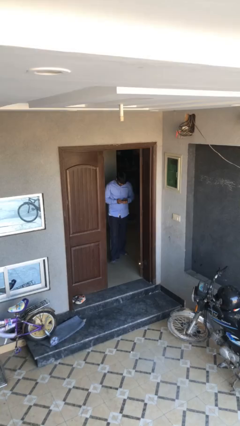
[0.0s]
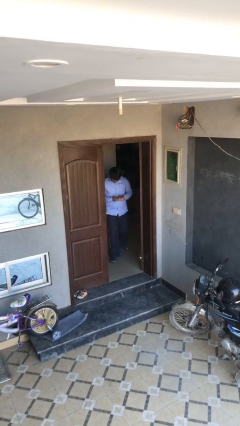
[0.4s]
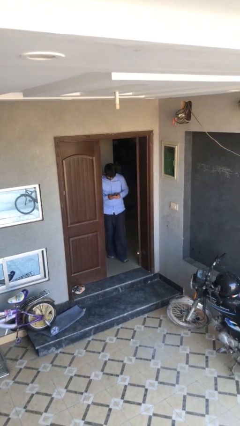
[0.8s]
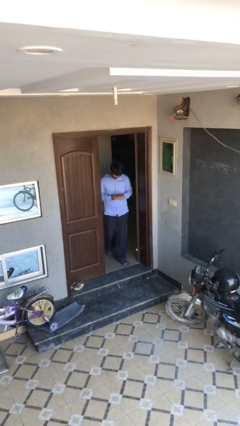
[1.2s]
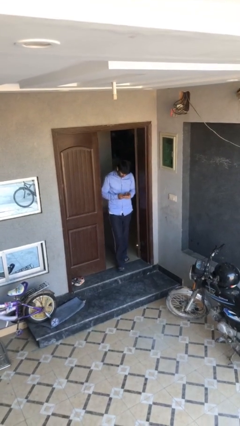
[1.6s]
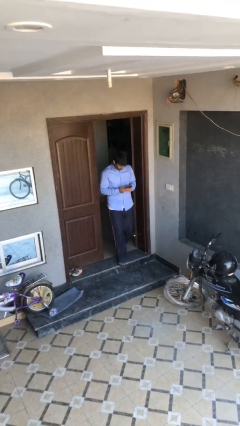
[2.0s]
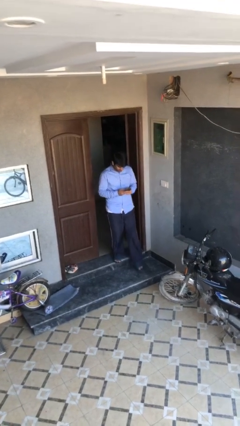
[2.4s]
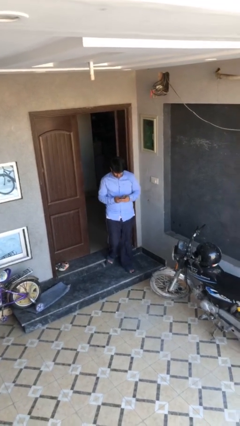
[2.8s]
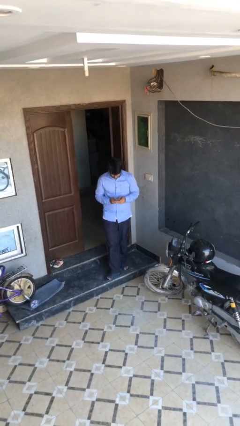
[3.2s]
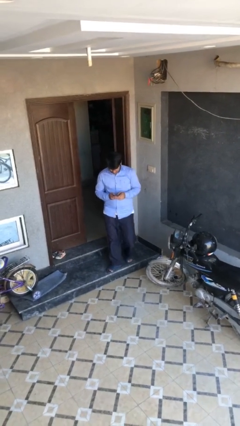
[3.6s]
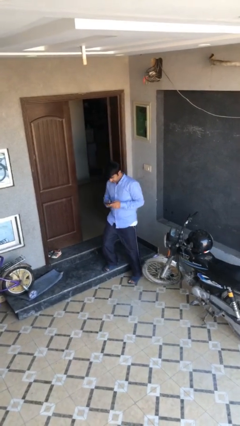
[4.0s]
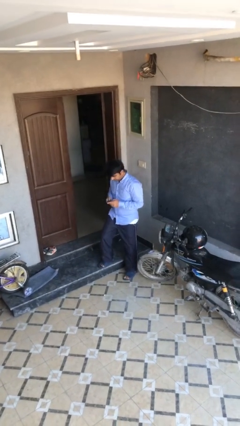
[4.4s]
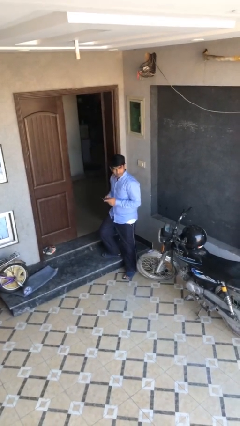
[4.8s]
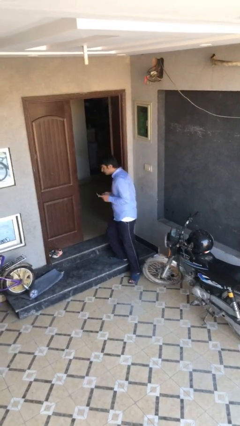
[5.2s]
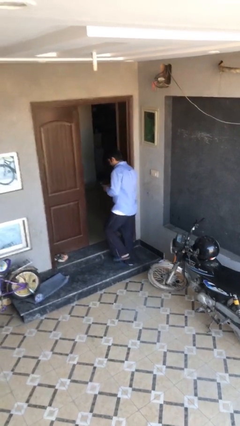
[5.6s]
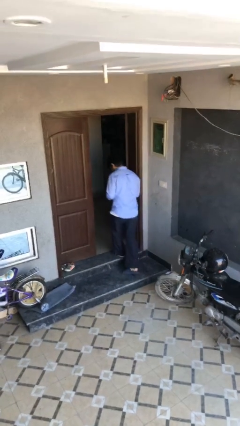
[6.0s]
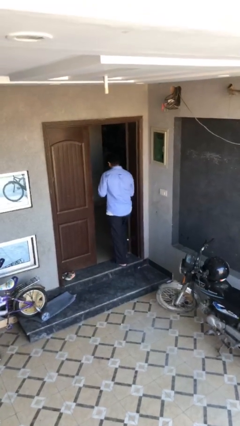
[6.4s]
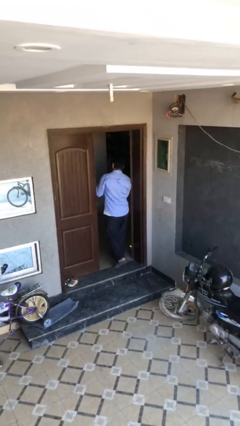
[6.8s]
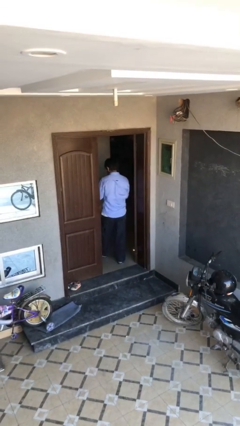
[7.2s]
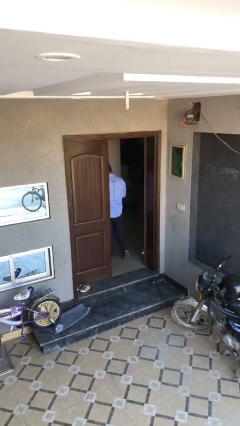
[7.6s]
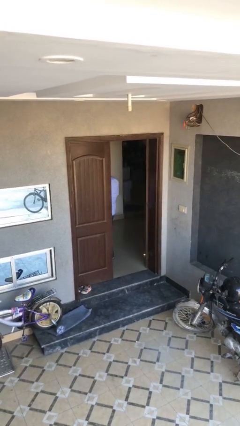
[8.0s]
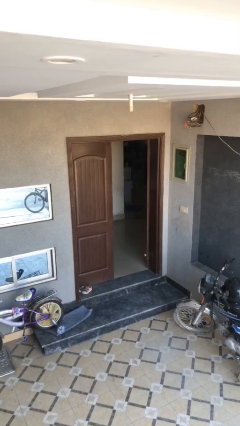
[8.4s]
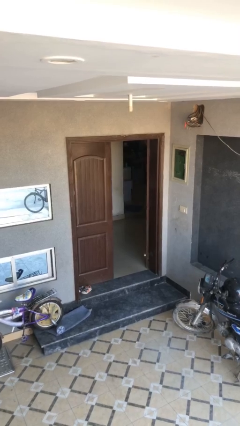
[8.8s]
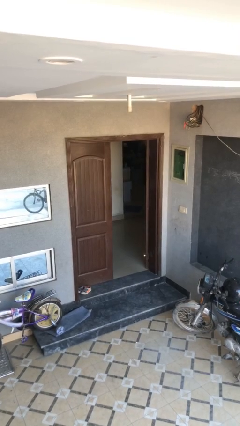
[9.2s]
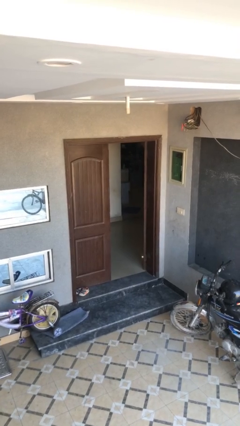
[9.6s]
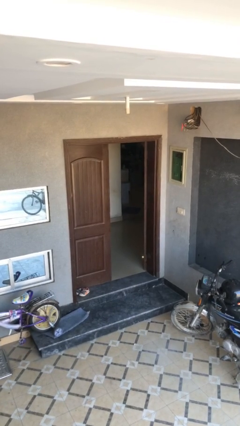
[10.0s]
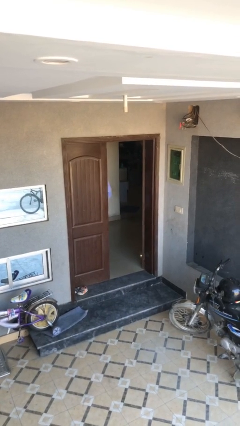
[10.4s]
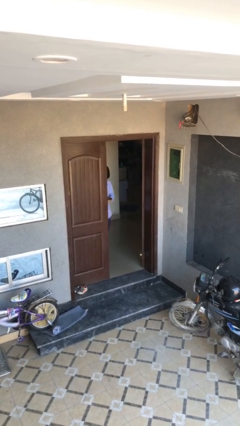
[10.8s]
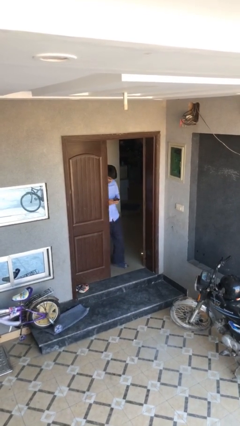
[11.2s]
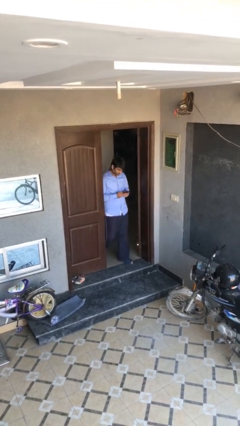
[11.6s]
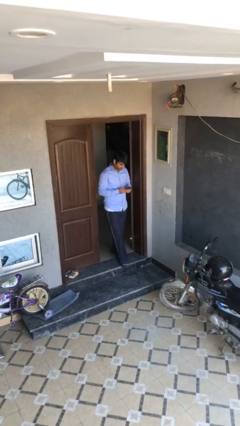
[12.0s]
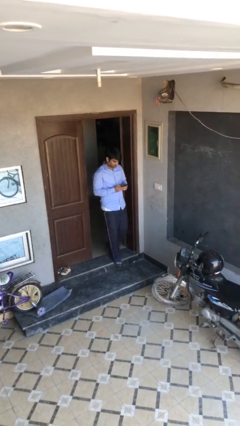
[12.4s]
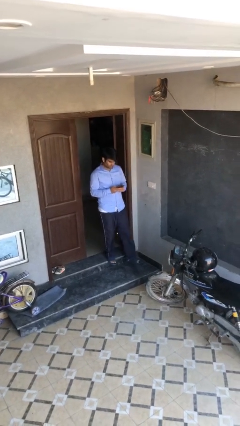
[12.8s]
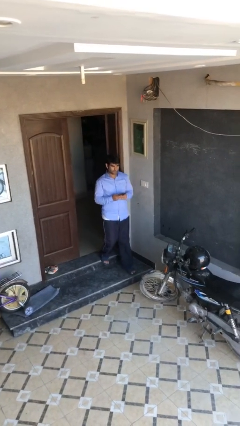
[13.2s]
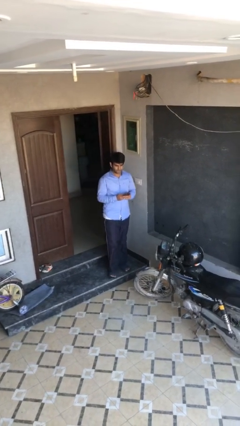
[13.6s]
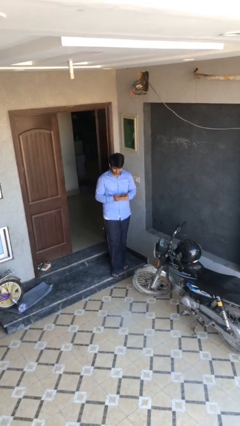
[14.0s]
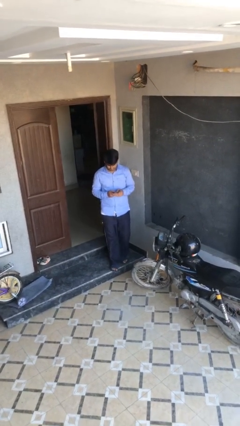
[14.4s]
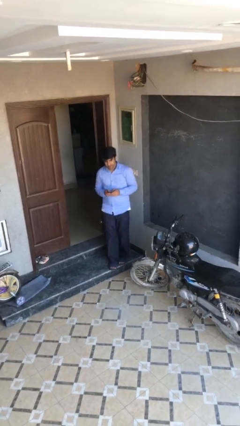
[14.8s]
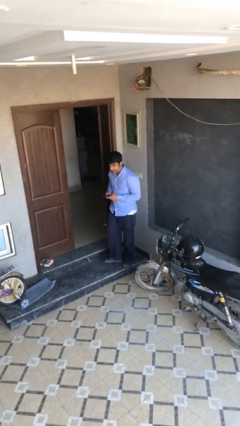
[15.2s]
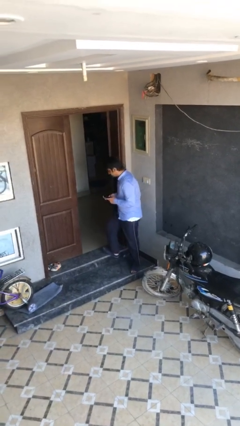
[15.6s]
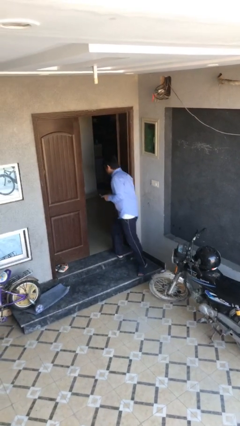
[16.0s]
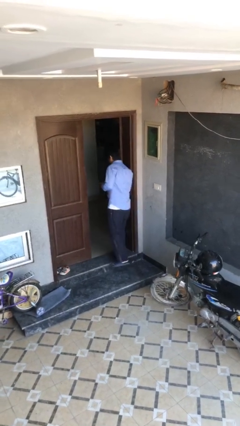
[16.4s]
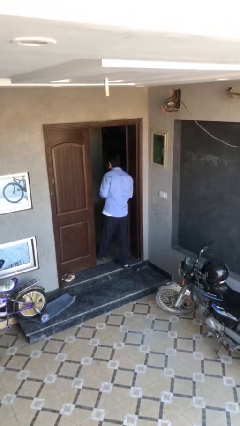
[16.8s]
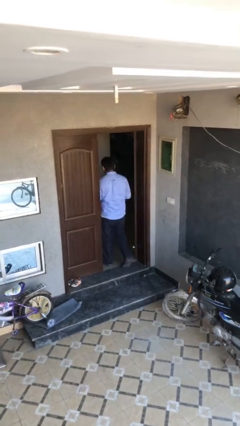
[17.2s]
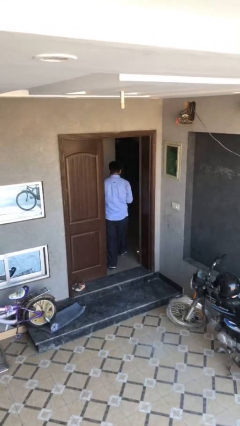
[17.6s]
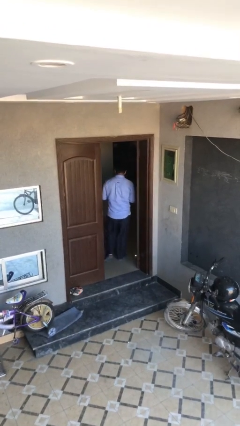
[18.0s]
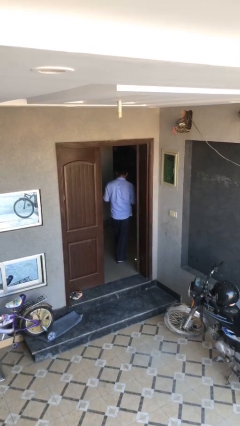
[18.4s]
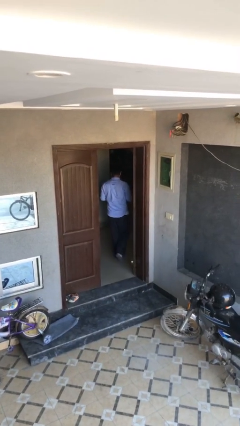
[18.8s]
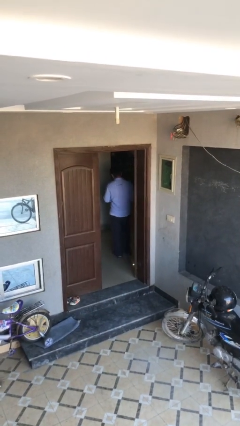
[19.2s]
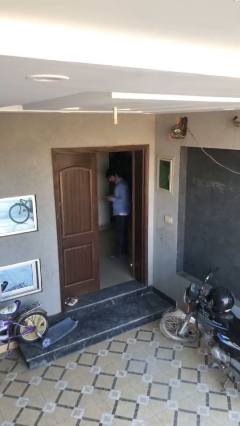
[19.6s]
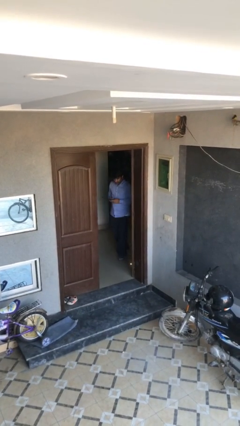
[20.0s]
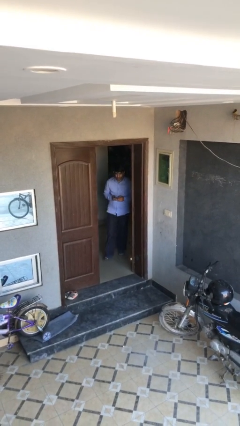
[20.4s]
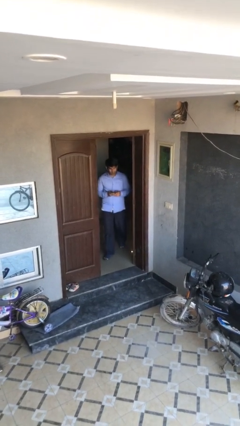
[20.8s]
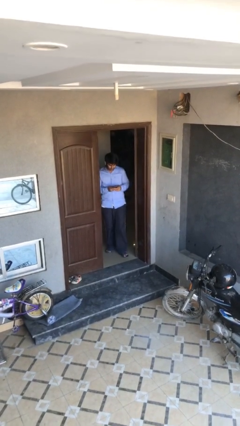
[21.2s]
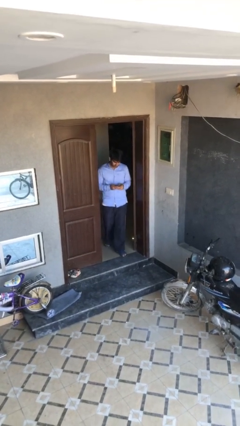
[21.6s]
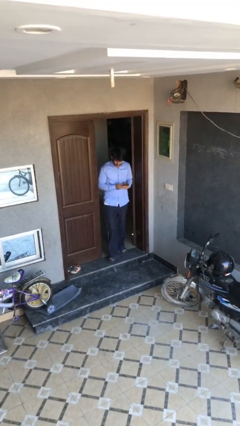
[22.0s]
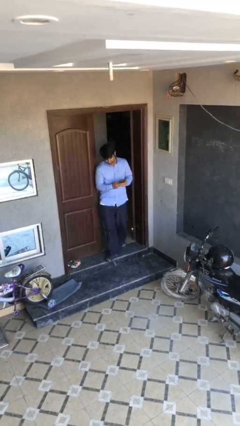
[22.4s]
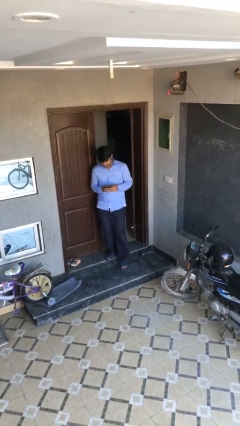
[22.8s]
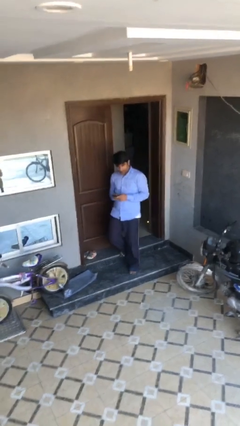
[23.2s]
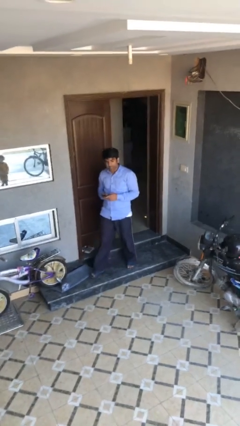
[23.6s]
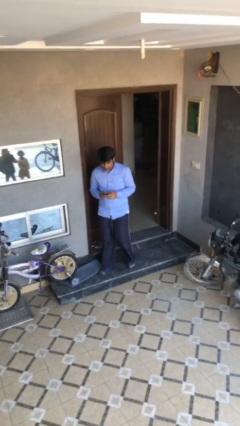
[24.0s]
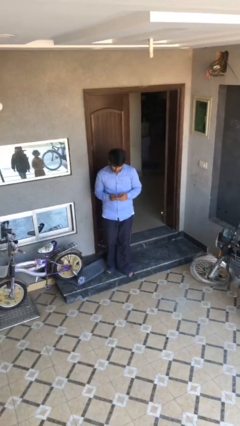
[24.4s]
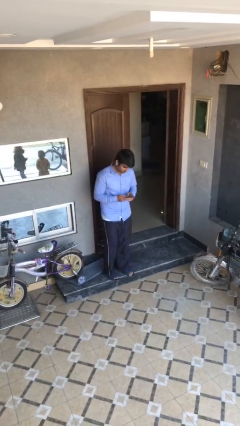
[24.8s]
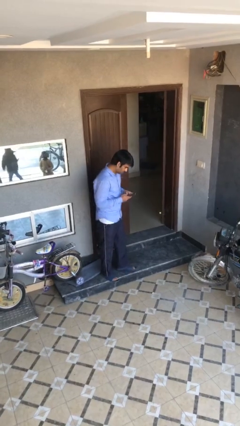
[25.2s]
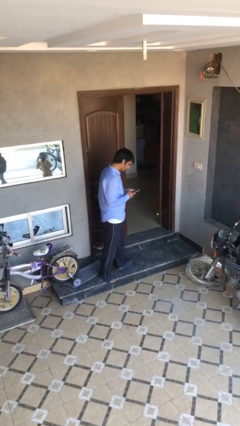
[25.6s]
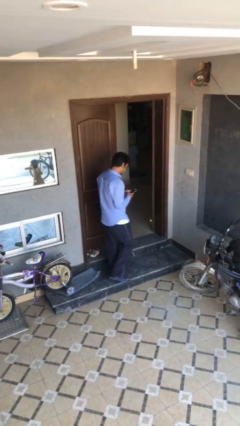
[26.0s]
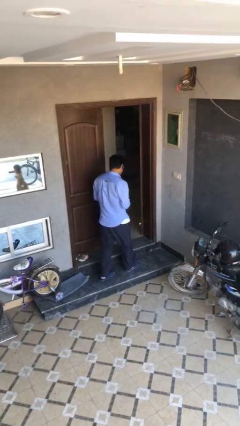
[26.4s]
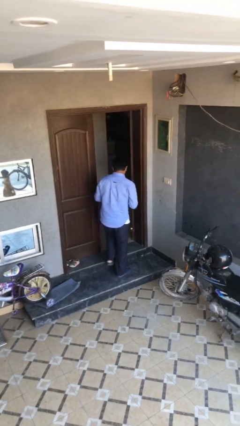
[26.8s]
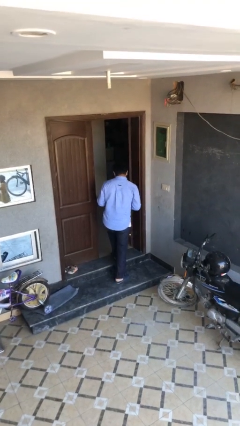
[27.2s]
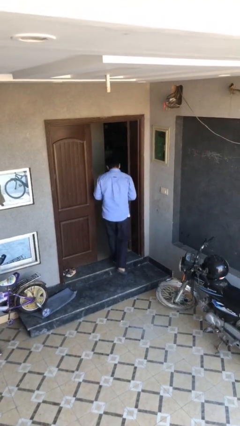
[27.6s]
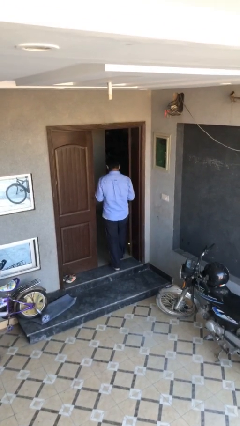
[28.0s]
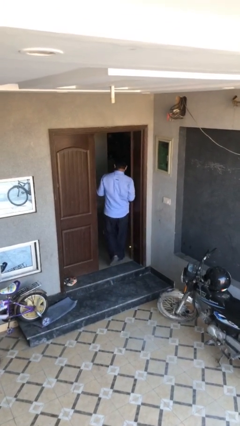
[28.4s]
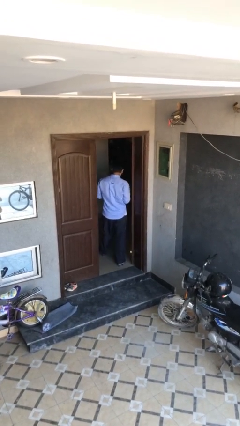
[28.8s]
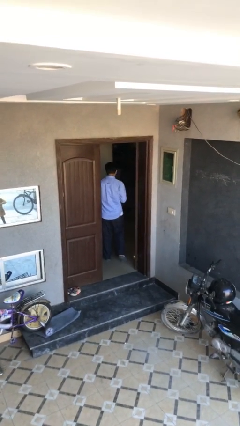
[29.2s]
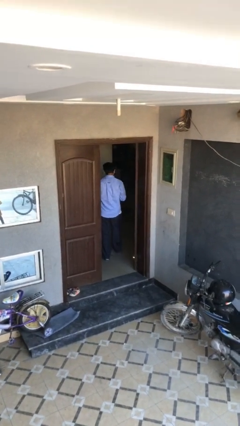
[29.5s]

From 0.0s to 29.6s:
person texts on phone

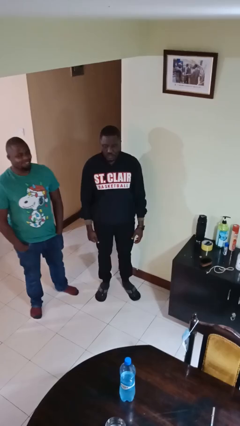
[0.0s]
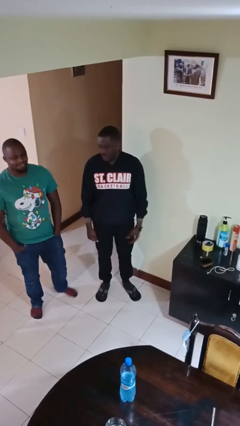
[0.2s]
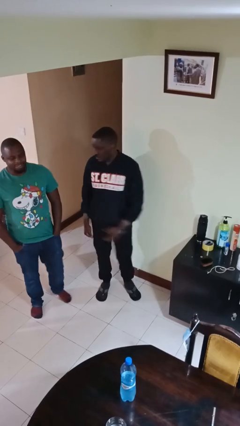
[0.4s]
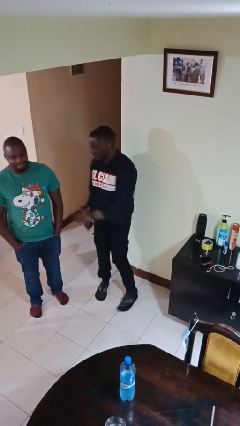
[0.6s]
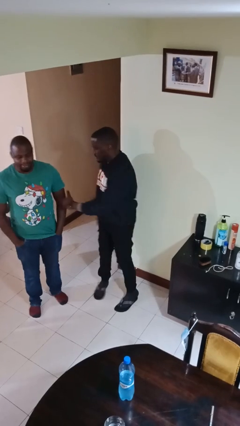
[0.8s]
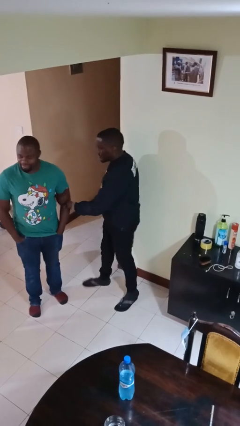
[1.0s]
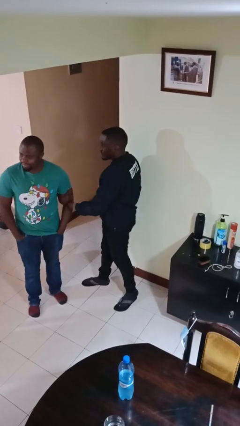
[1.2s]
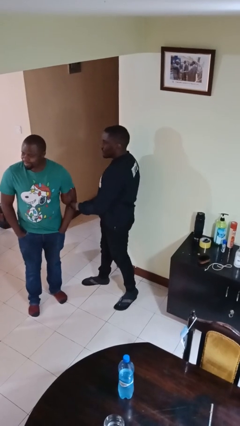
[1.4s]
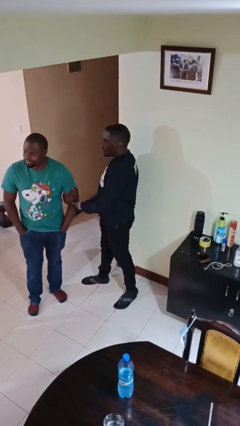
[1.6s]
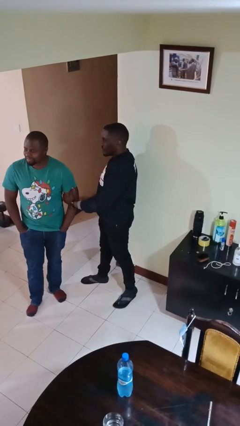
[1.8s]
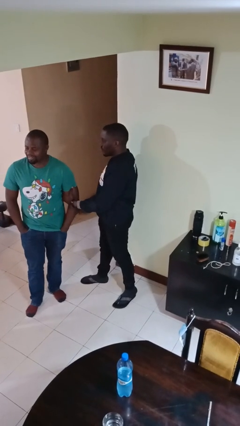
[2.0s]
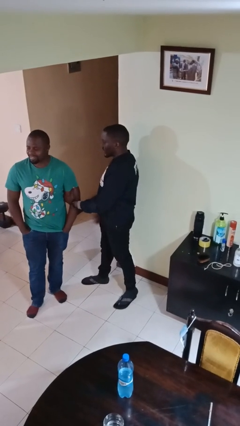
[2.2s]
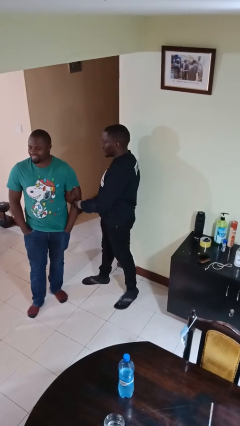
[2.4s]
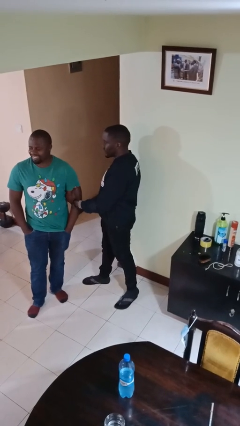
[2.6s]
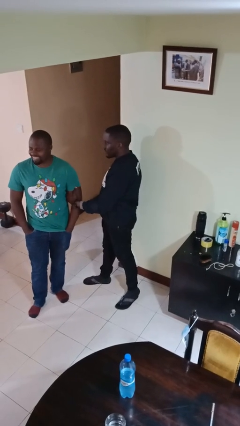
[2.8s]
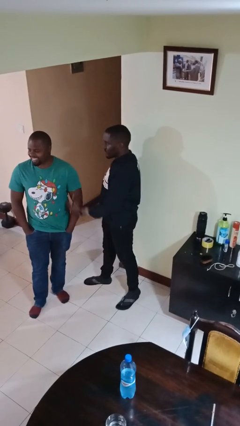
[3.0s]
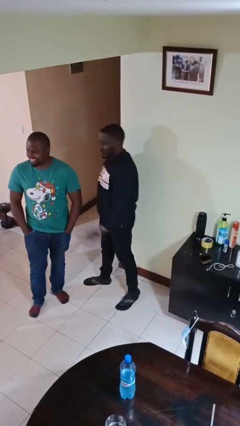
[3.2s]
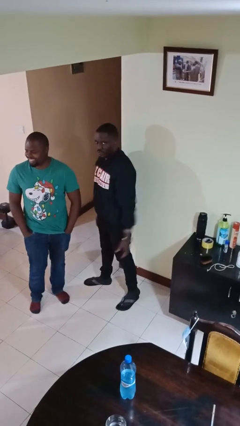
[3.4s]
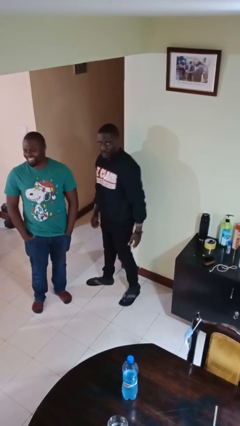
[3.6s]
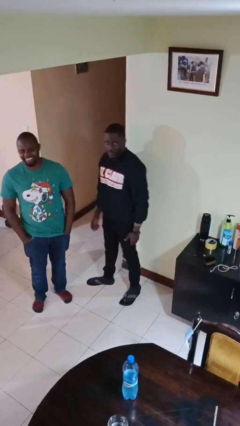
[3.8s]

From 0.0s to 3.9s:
person grabs person by bicep
